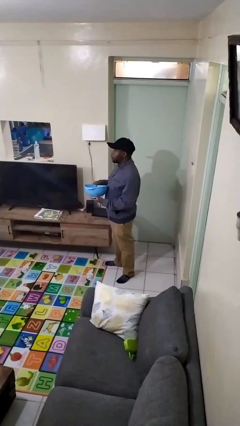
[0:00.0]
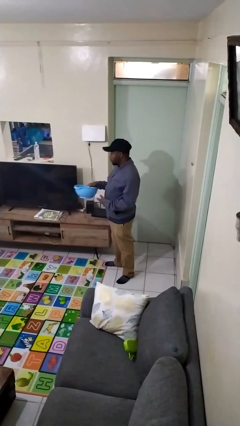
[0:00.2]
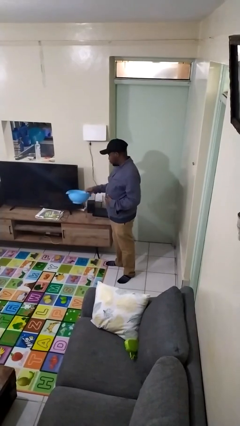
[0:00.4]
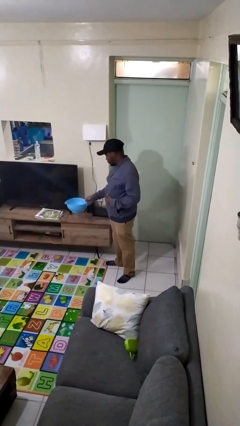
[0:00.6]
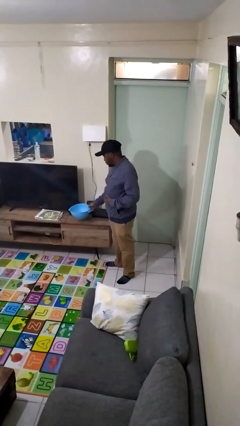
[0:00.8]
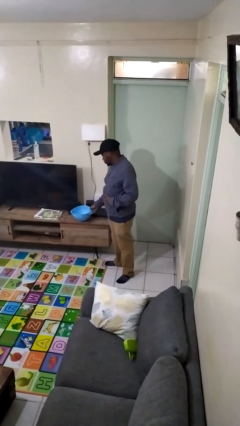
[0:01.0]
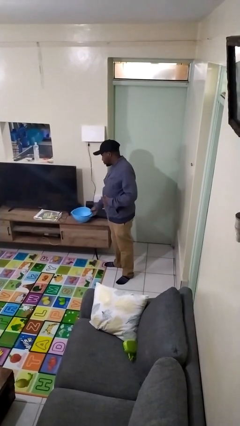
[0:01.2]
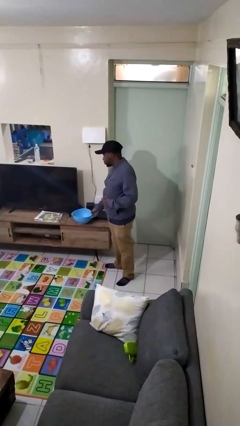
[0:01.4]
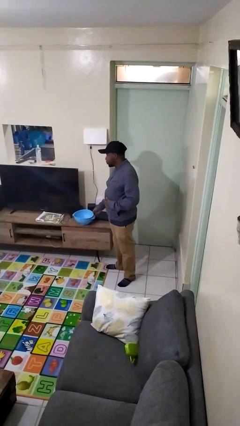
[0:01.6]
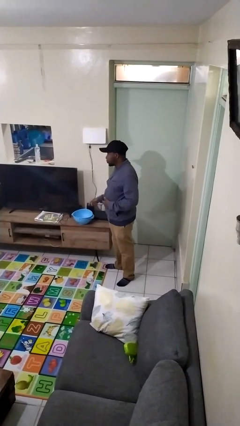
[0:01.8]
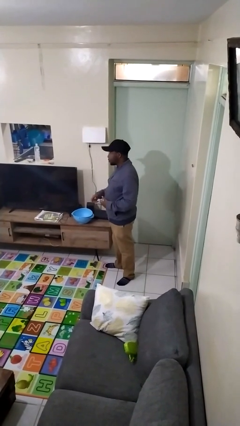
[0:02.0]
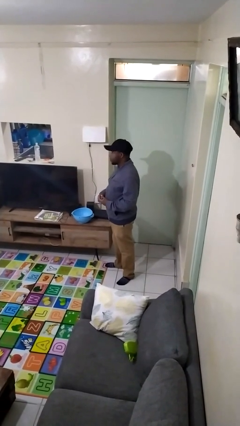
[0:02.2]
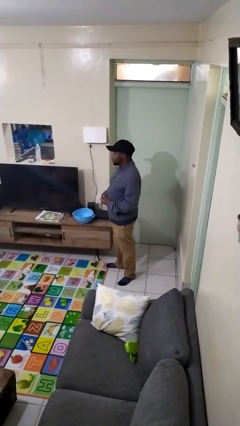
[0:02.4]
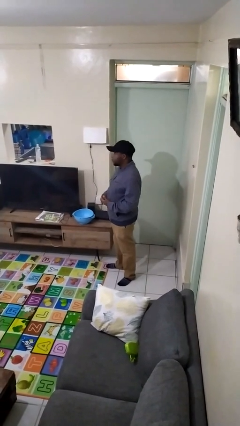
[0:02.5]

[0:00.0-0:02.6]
person puts down object on countertop

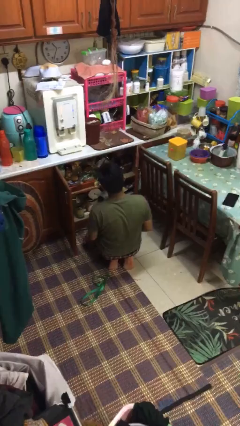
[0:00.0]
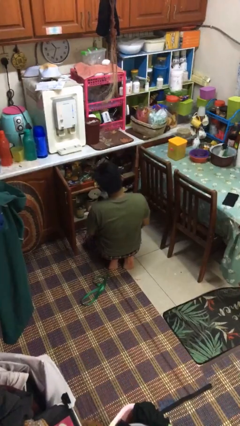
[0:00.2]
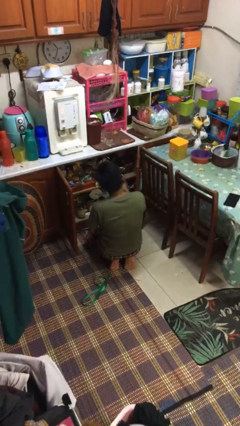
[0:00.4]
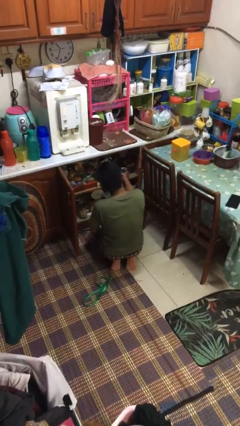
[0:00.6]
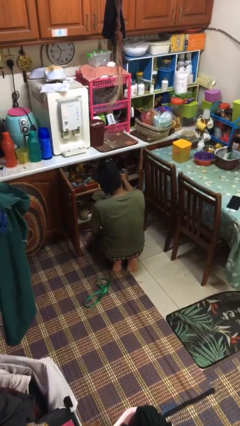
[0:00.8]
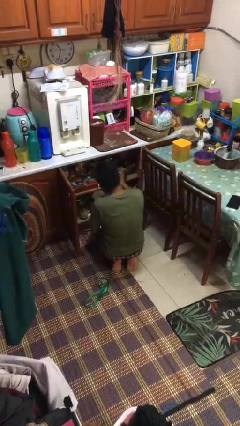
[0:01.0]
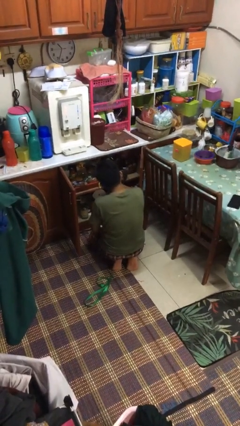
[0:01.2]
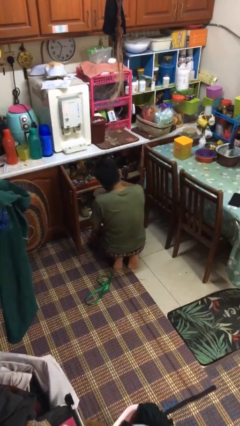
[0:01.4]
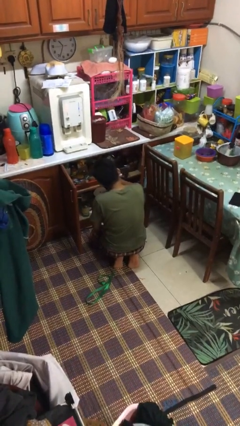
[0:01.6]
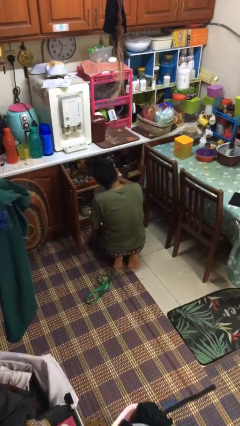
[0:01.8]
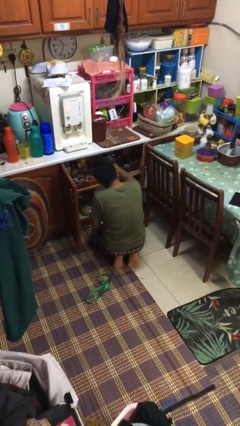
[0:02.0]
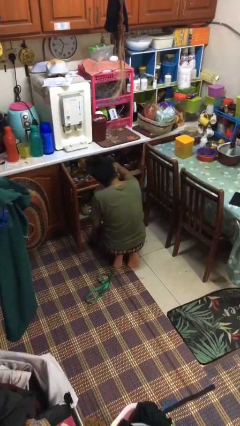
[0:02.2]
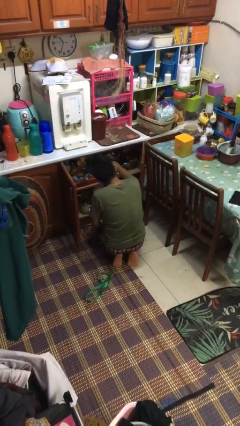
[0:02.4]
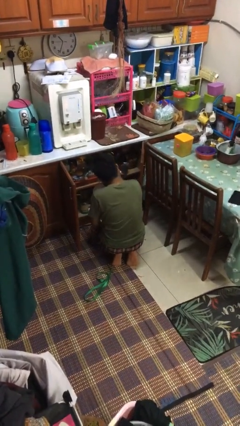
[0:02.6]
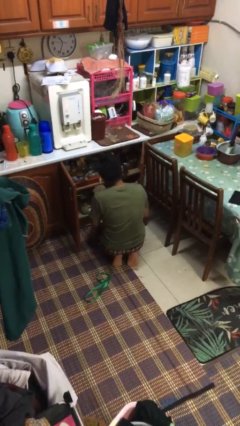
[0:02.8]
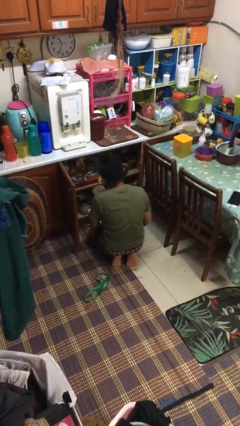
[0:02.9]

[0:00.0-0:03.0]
person searches in kitchen drawer

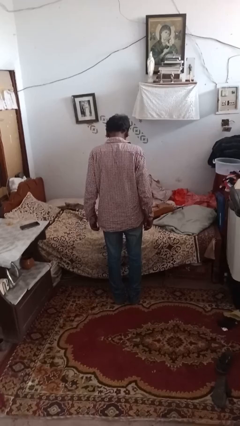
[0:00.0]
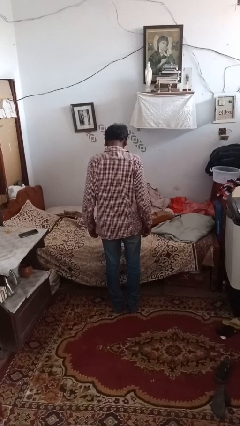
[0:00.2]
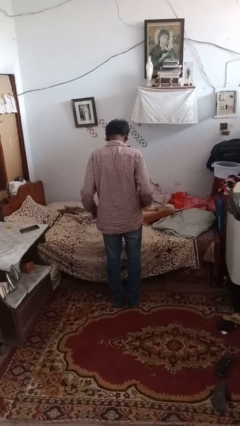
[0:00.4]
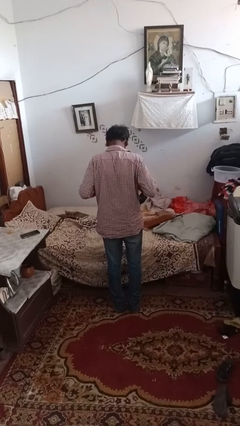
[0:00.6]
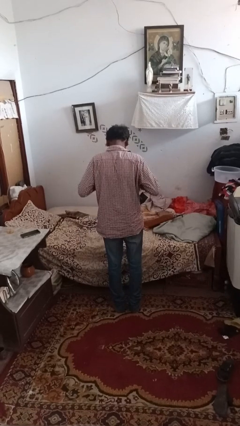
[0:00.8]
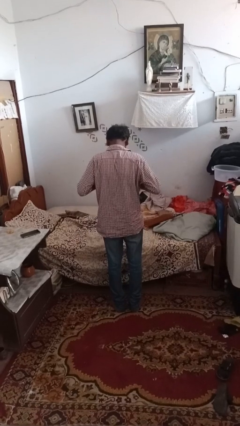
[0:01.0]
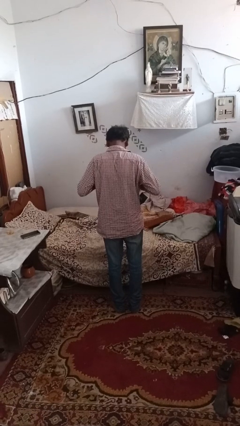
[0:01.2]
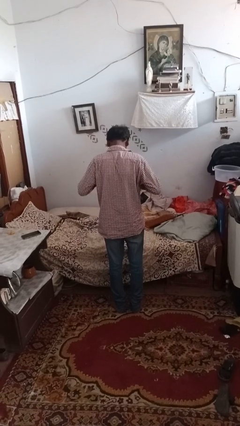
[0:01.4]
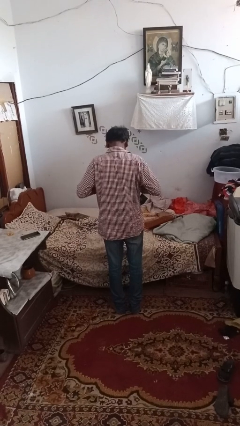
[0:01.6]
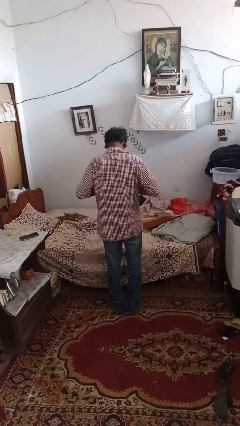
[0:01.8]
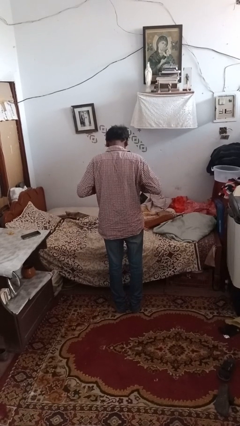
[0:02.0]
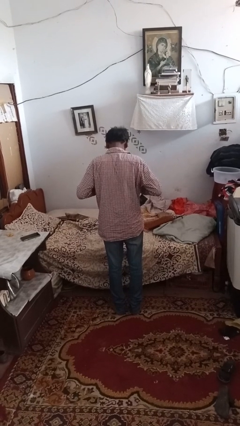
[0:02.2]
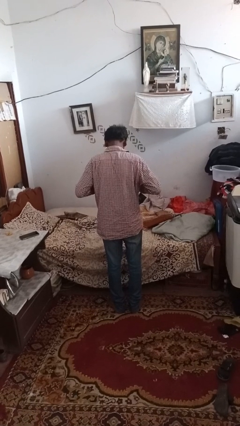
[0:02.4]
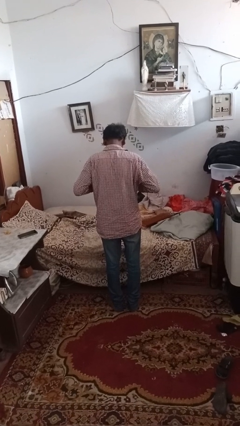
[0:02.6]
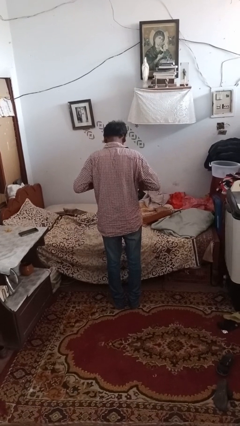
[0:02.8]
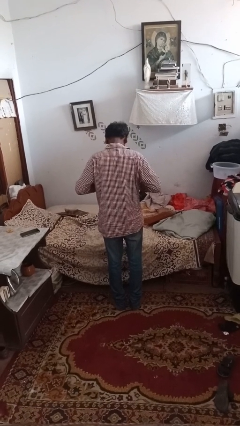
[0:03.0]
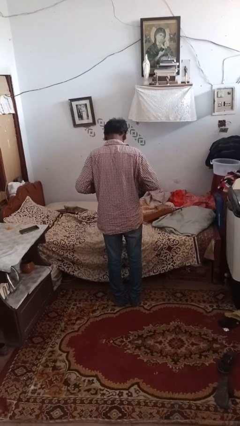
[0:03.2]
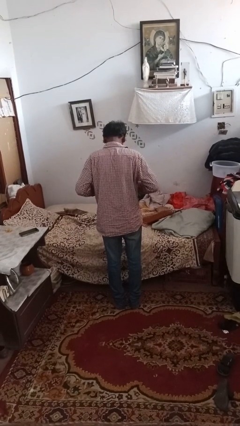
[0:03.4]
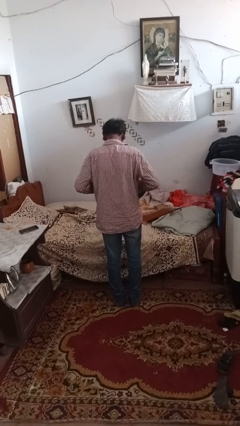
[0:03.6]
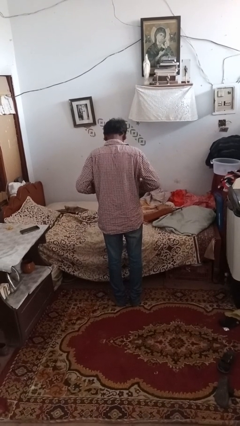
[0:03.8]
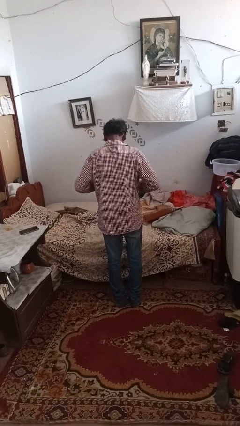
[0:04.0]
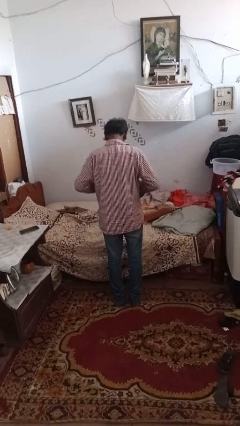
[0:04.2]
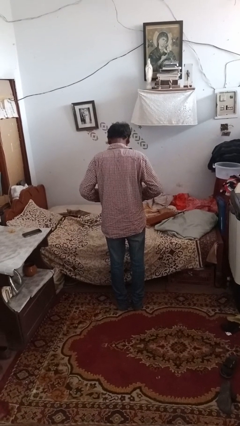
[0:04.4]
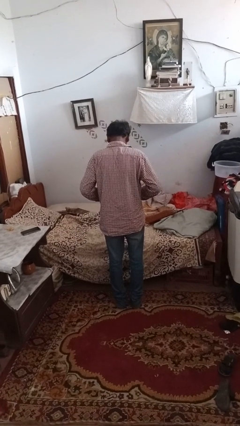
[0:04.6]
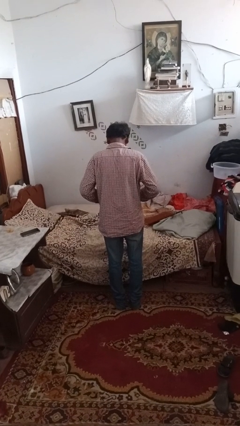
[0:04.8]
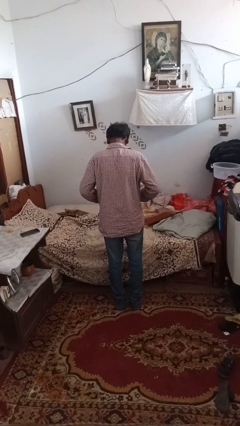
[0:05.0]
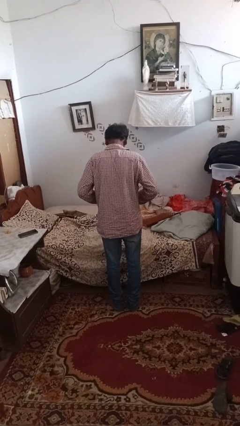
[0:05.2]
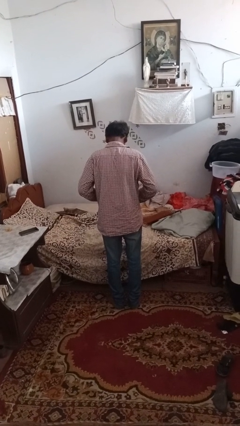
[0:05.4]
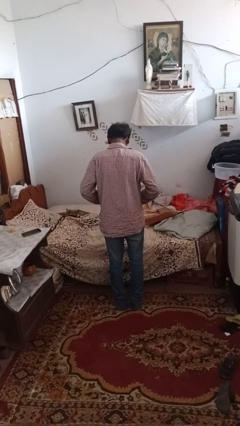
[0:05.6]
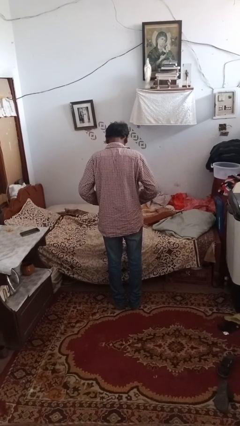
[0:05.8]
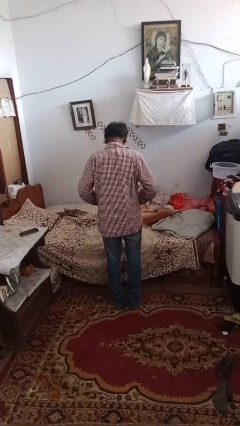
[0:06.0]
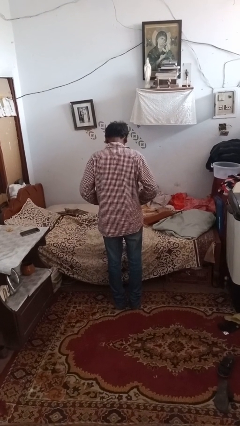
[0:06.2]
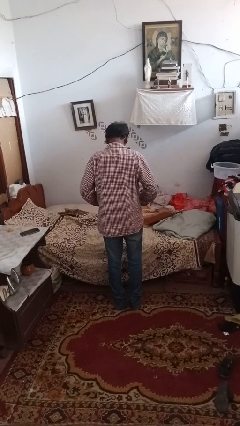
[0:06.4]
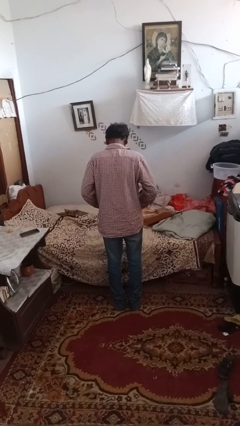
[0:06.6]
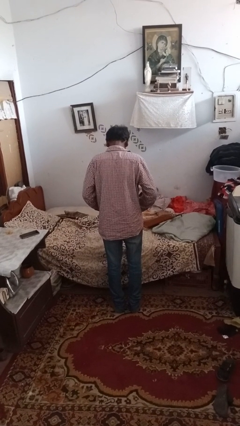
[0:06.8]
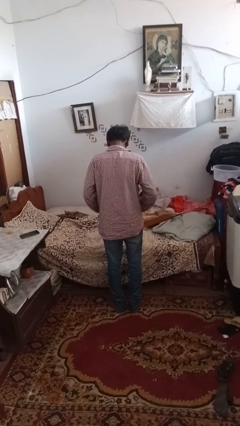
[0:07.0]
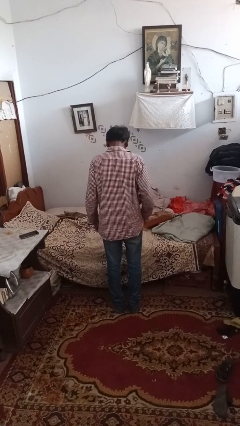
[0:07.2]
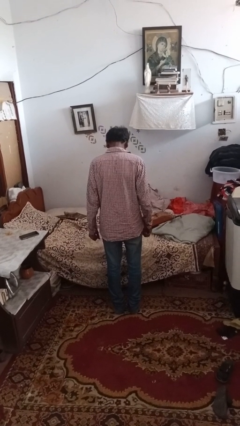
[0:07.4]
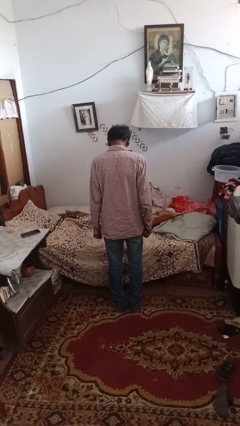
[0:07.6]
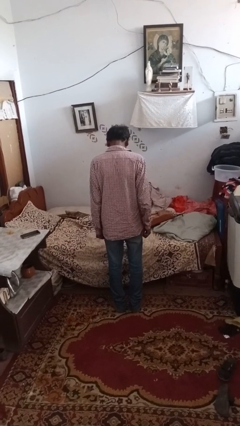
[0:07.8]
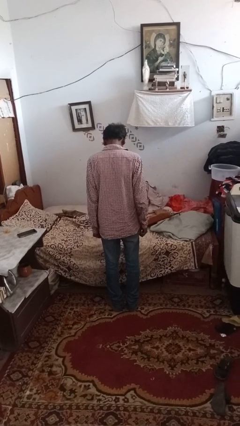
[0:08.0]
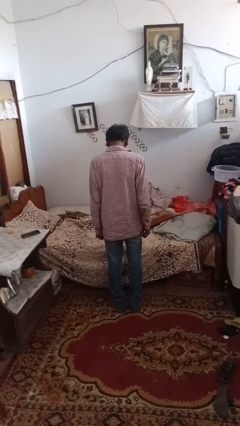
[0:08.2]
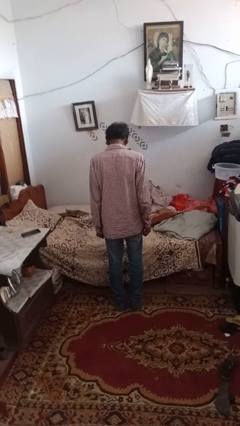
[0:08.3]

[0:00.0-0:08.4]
person unbuttons shirt

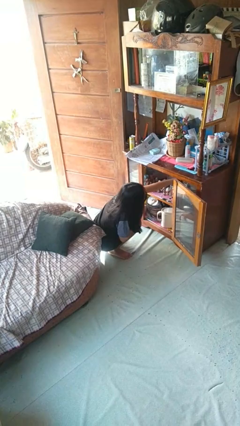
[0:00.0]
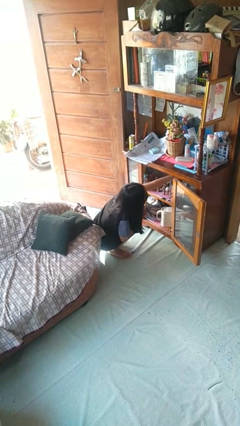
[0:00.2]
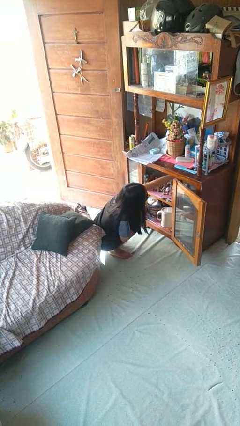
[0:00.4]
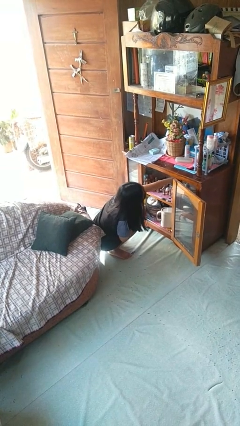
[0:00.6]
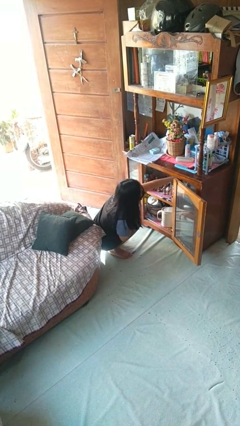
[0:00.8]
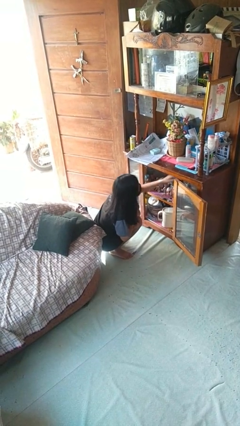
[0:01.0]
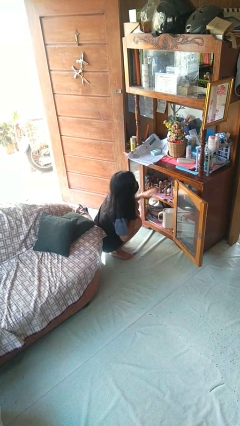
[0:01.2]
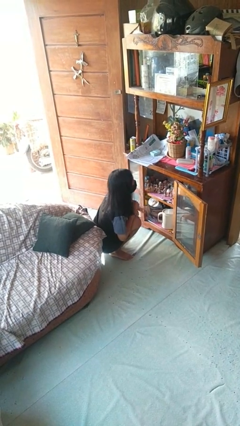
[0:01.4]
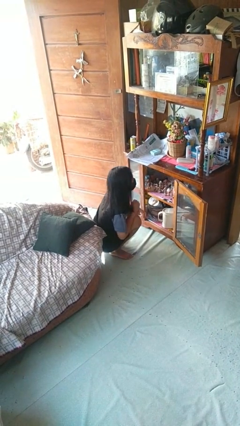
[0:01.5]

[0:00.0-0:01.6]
person searches in cabinet

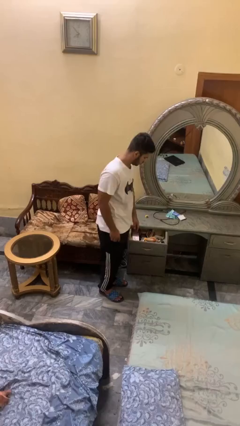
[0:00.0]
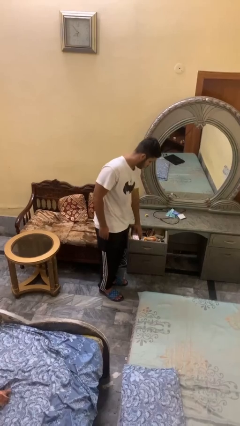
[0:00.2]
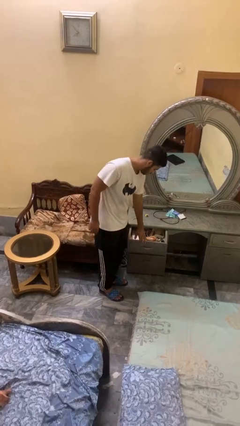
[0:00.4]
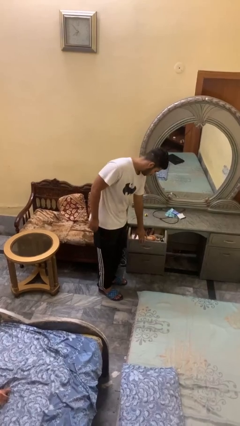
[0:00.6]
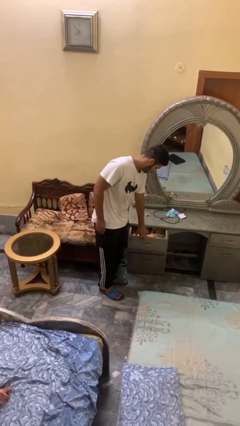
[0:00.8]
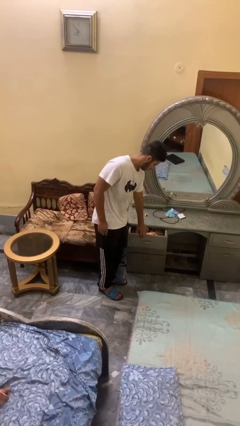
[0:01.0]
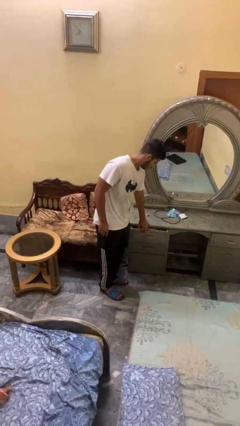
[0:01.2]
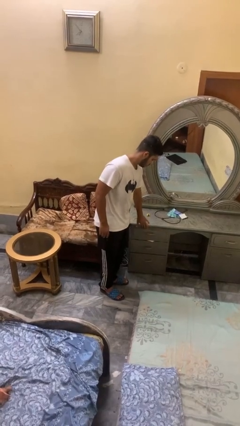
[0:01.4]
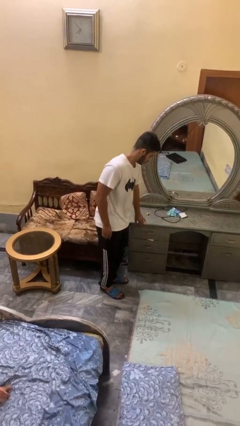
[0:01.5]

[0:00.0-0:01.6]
person closes dresser drawer
